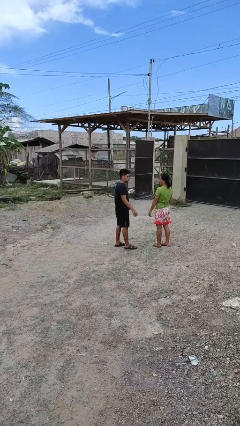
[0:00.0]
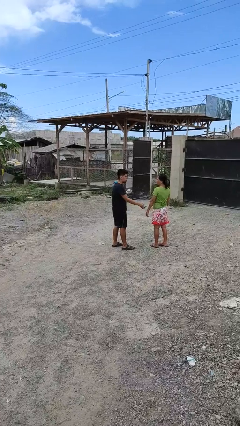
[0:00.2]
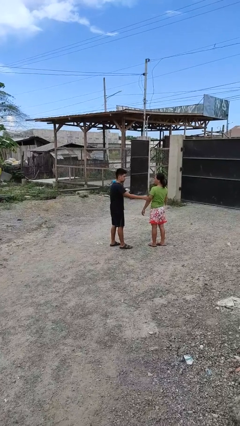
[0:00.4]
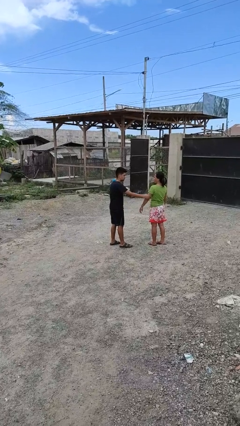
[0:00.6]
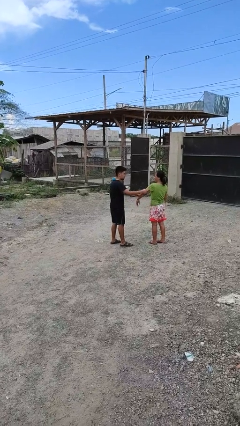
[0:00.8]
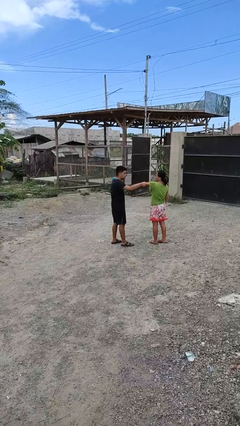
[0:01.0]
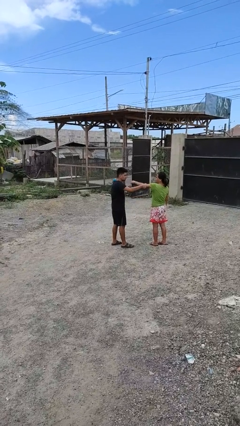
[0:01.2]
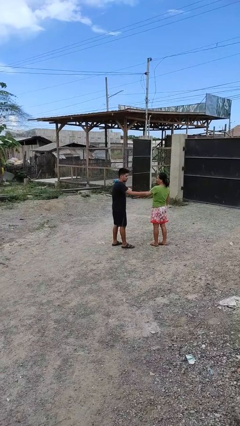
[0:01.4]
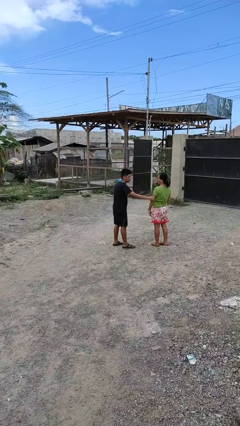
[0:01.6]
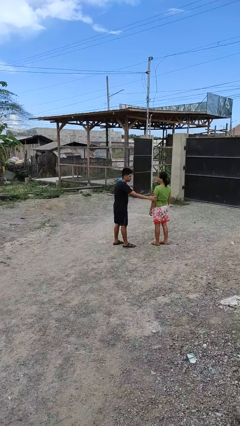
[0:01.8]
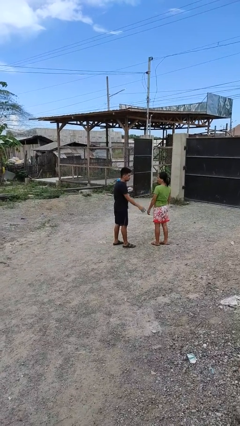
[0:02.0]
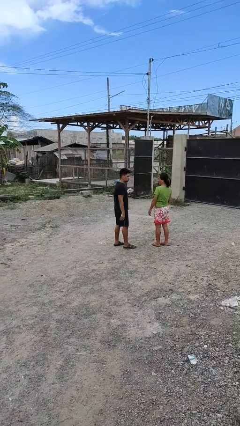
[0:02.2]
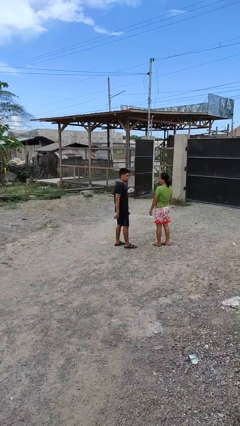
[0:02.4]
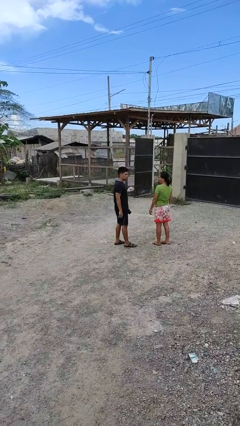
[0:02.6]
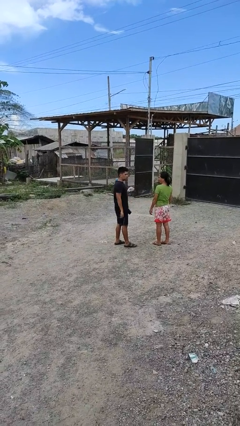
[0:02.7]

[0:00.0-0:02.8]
person grabs person by bicep

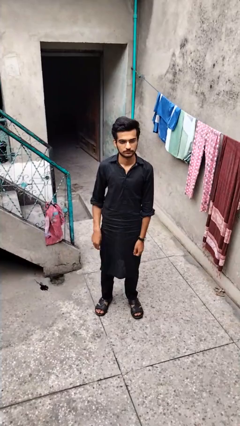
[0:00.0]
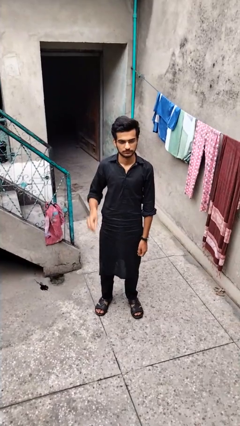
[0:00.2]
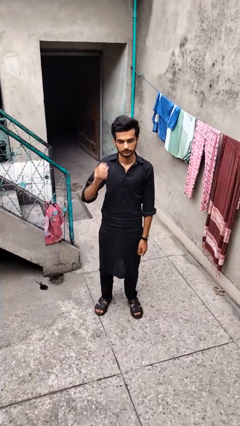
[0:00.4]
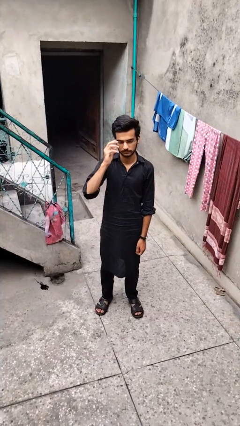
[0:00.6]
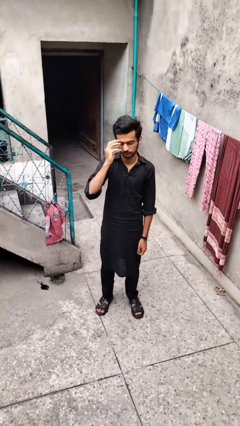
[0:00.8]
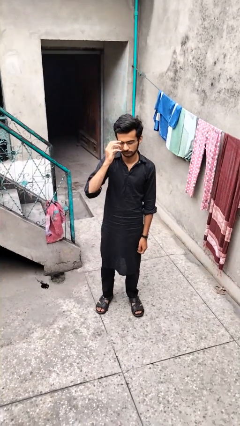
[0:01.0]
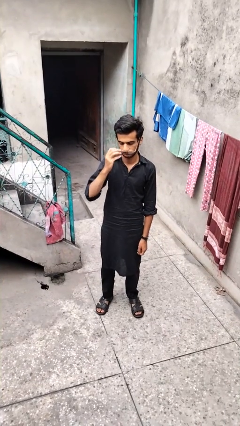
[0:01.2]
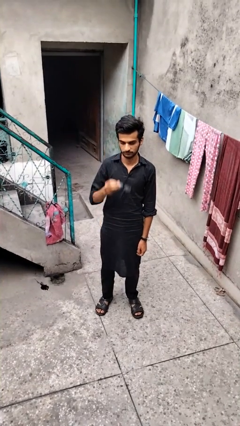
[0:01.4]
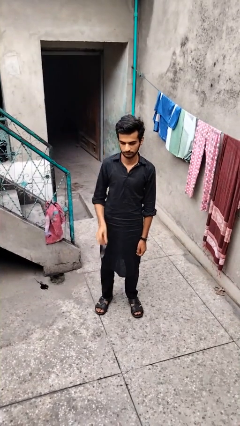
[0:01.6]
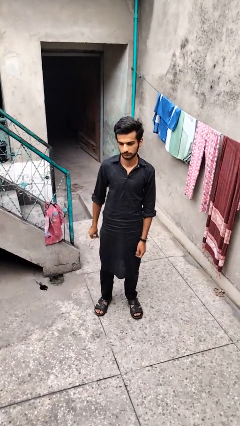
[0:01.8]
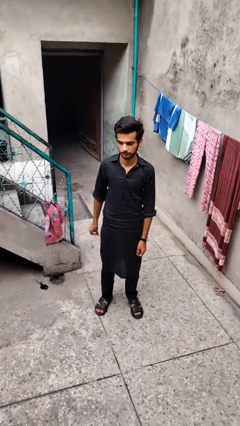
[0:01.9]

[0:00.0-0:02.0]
person takes off glasses

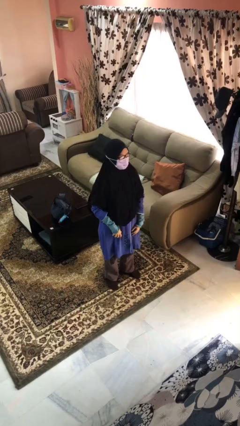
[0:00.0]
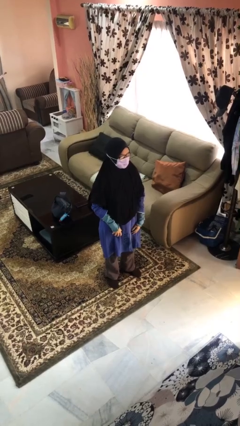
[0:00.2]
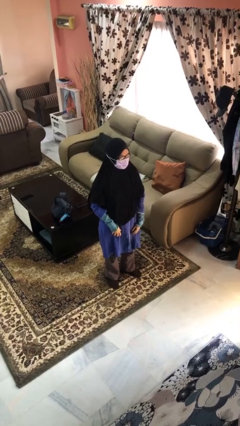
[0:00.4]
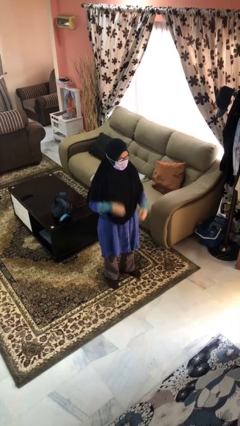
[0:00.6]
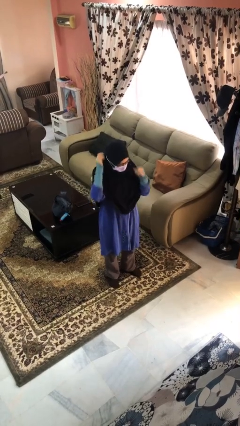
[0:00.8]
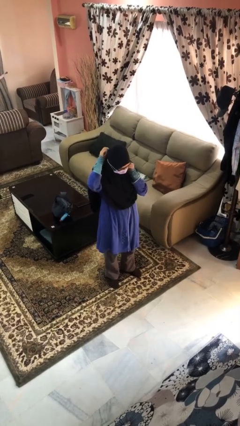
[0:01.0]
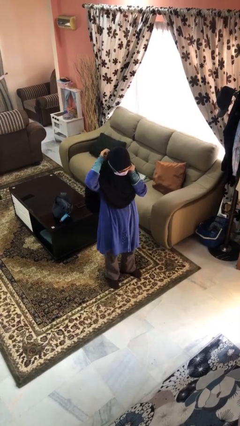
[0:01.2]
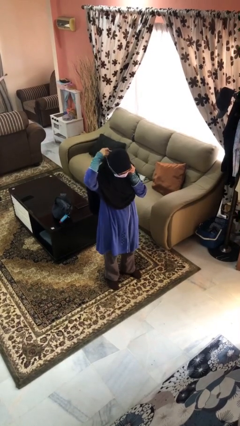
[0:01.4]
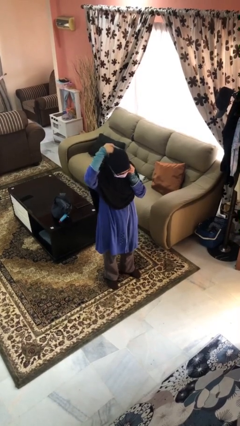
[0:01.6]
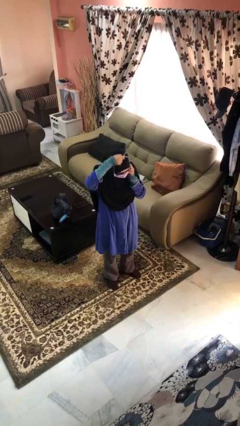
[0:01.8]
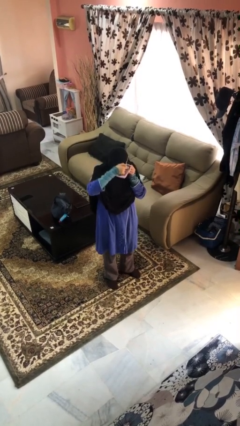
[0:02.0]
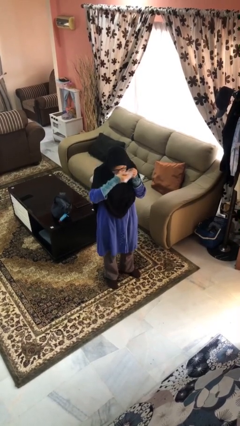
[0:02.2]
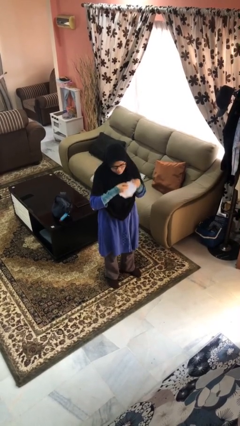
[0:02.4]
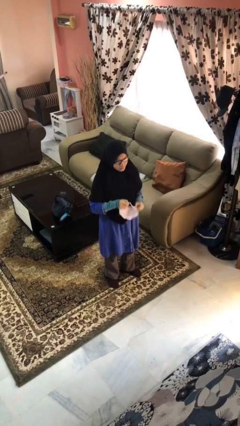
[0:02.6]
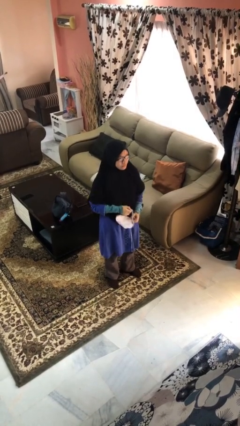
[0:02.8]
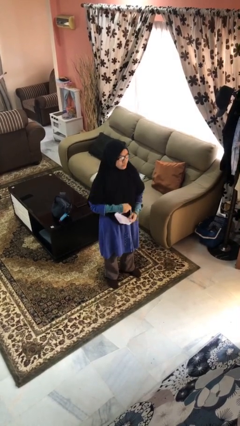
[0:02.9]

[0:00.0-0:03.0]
person takes off facemask

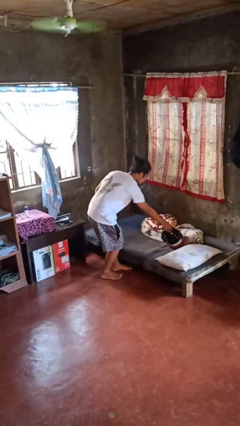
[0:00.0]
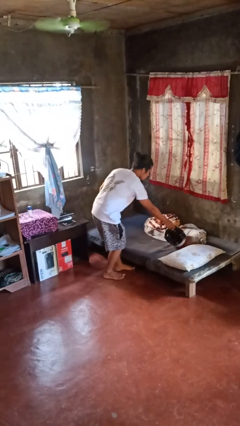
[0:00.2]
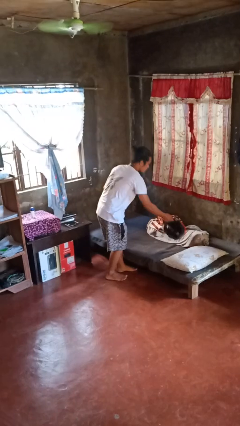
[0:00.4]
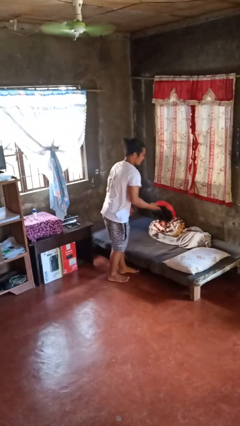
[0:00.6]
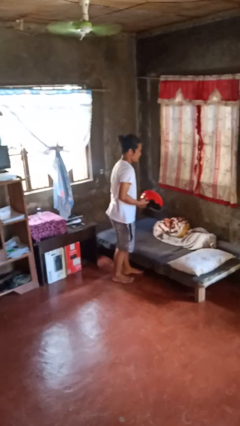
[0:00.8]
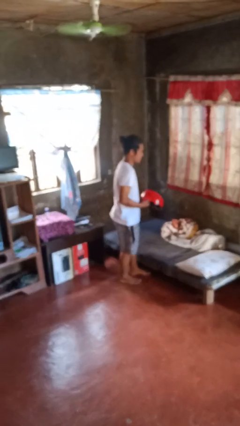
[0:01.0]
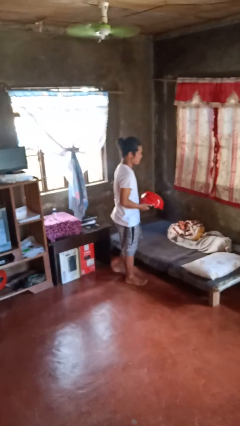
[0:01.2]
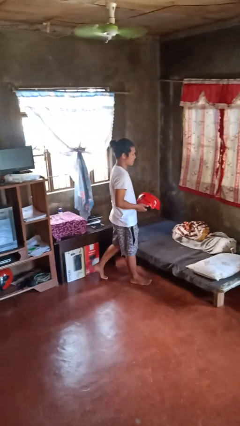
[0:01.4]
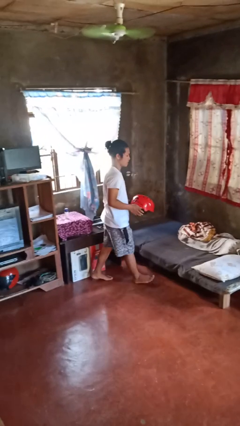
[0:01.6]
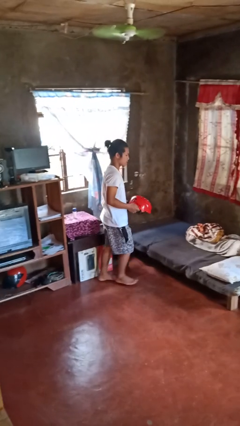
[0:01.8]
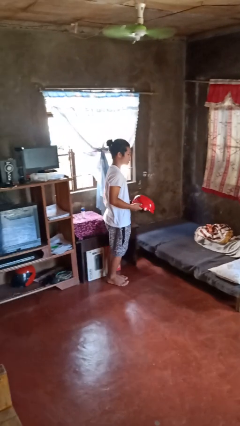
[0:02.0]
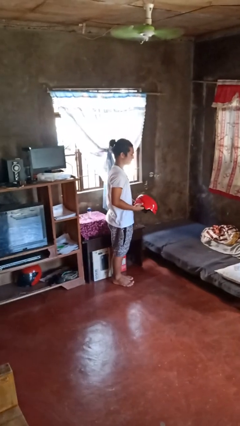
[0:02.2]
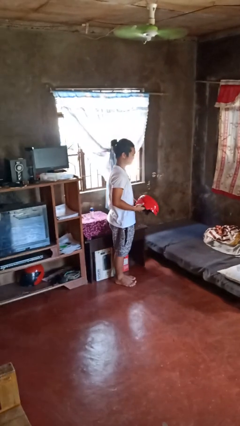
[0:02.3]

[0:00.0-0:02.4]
person picks up object from bed

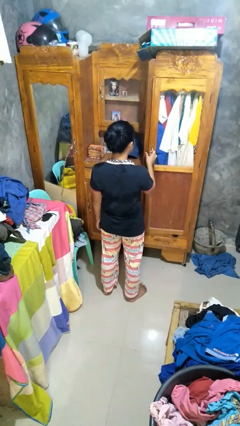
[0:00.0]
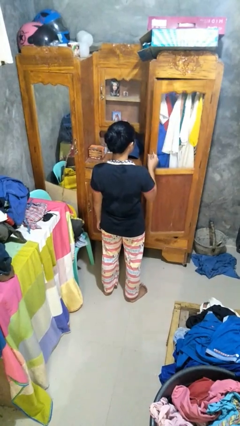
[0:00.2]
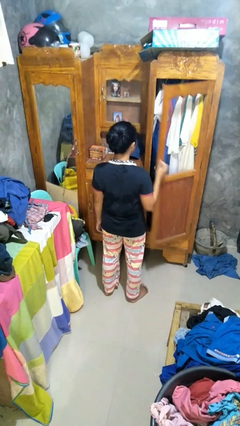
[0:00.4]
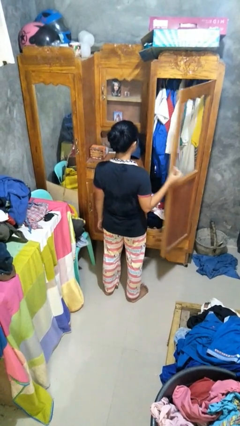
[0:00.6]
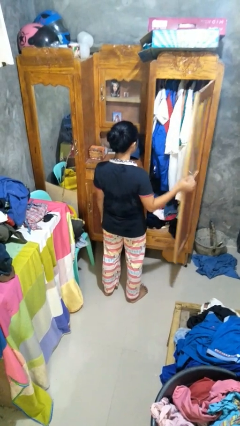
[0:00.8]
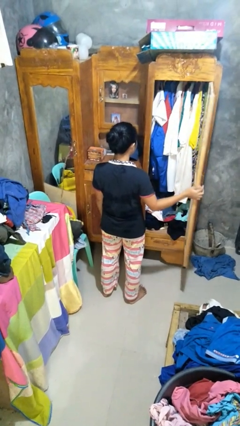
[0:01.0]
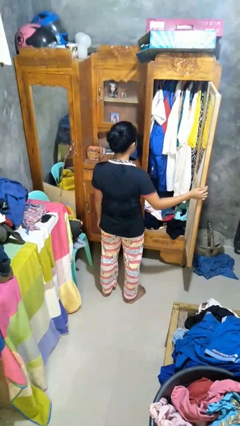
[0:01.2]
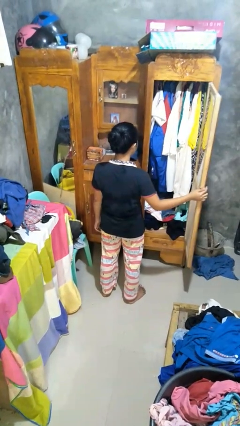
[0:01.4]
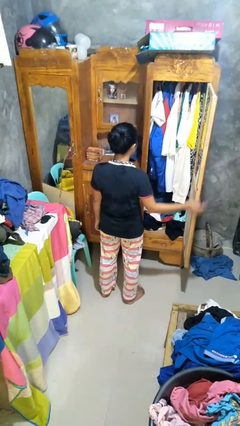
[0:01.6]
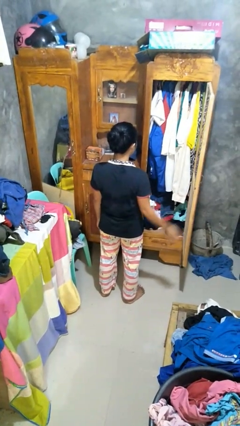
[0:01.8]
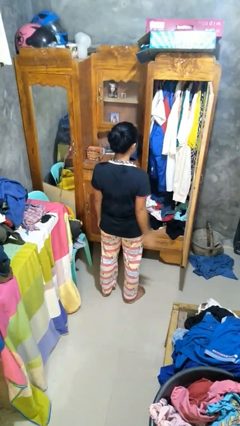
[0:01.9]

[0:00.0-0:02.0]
person opens closet door

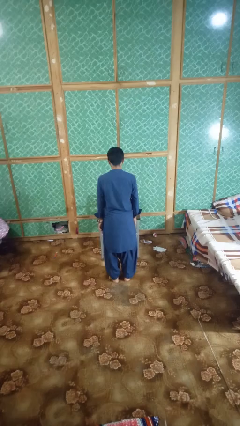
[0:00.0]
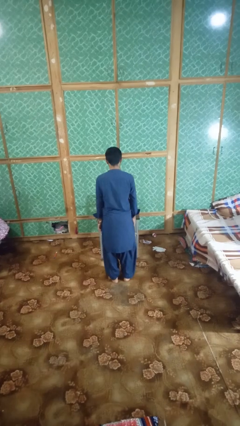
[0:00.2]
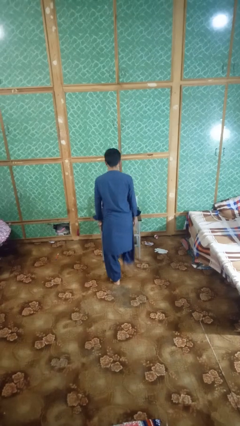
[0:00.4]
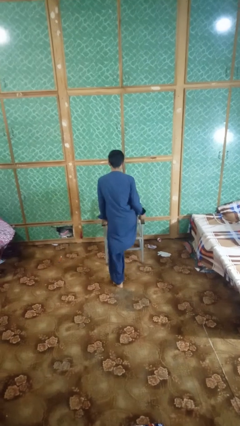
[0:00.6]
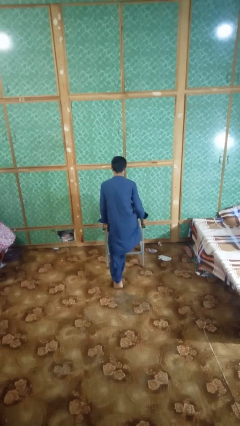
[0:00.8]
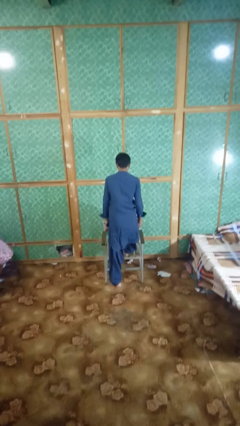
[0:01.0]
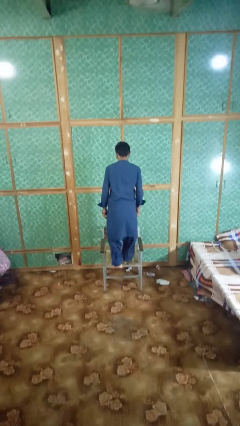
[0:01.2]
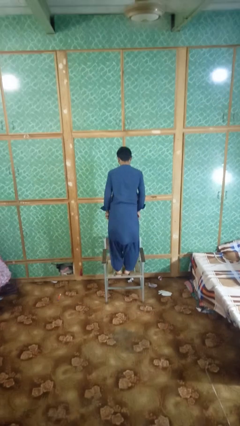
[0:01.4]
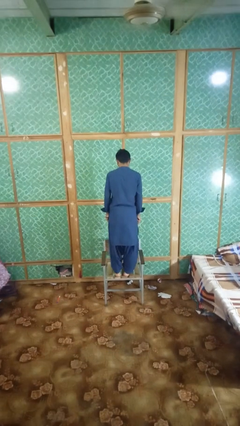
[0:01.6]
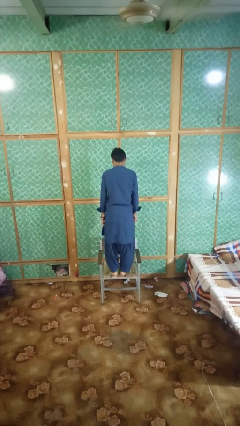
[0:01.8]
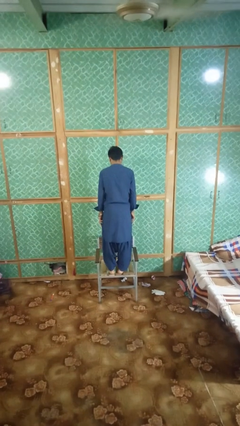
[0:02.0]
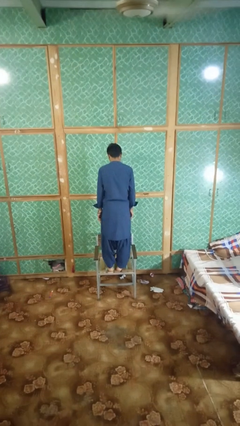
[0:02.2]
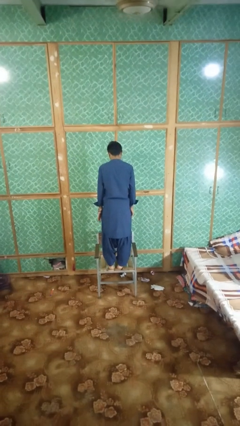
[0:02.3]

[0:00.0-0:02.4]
person climbs on chair

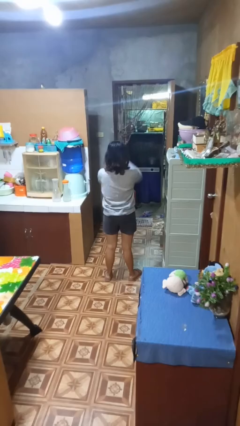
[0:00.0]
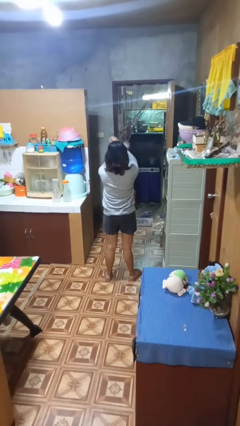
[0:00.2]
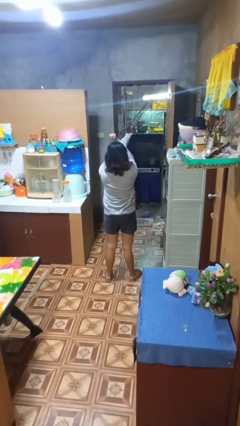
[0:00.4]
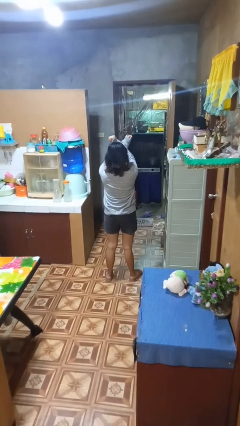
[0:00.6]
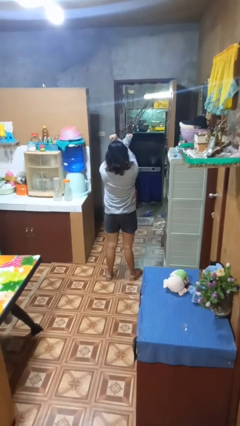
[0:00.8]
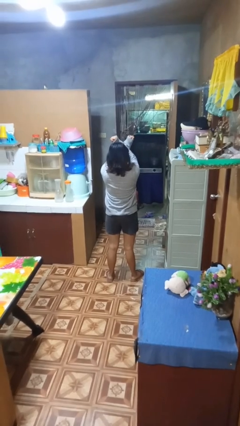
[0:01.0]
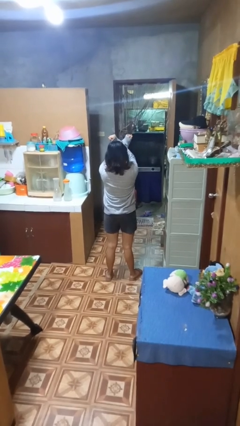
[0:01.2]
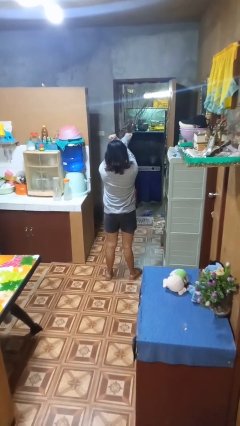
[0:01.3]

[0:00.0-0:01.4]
person gestures arms x

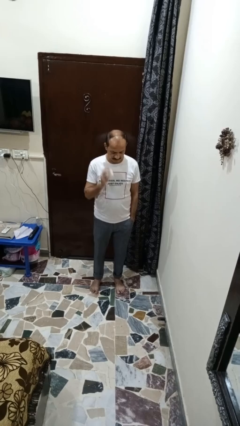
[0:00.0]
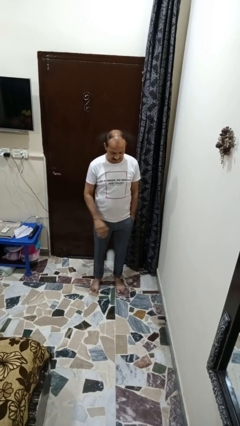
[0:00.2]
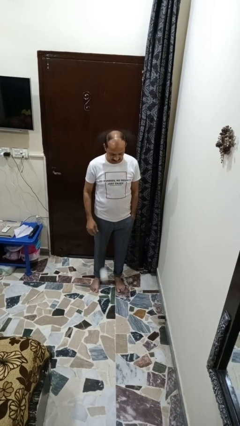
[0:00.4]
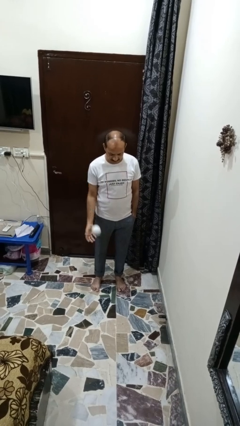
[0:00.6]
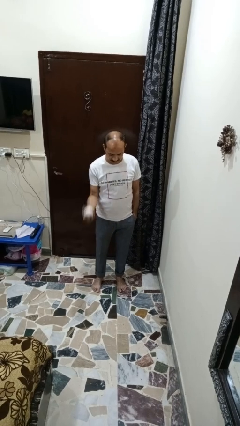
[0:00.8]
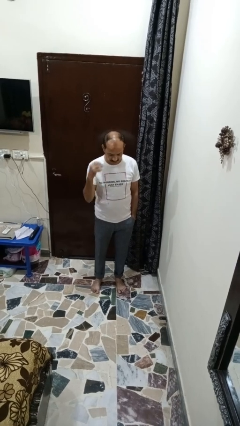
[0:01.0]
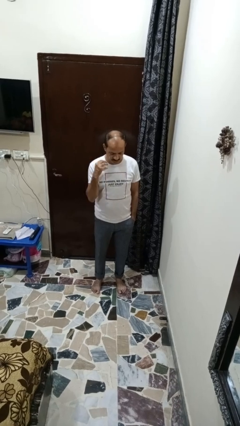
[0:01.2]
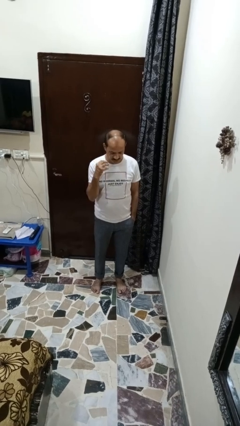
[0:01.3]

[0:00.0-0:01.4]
person bounces ball on floor
